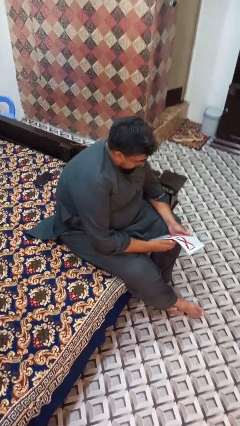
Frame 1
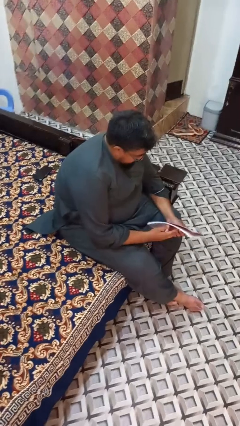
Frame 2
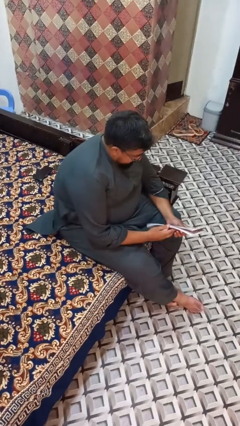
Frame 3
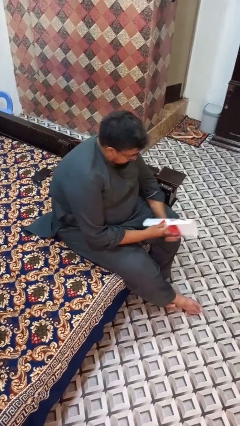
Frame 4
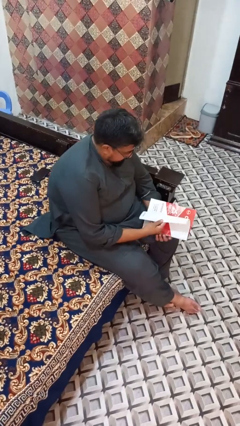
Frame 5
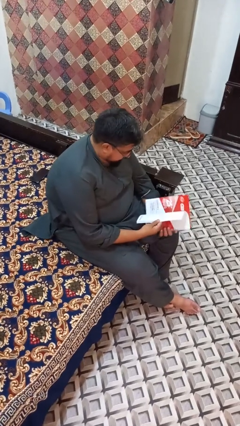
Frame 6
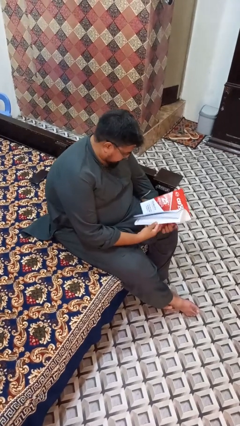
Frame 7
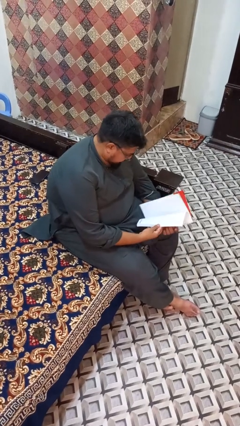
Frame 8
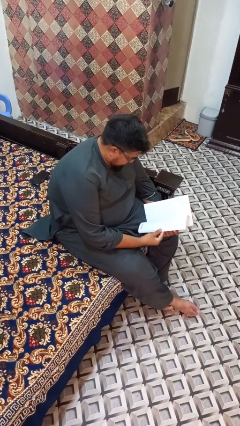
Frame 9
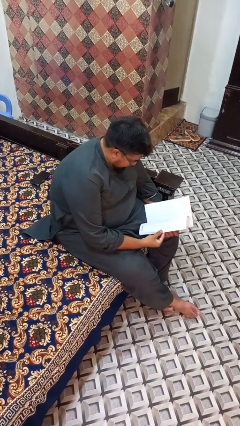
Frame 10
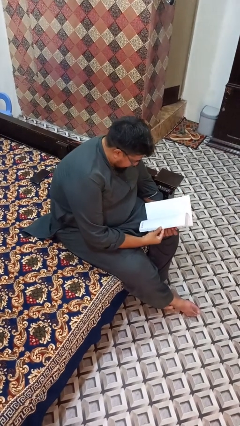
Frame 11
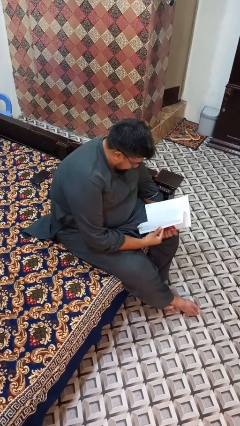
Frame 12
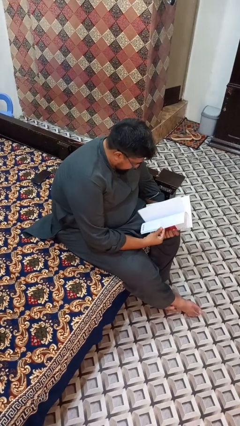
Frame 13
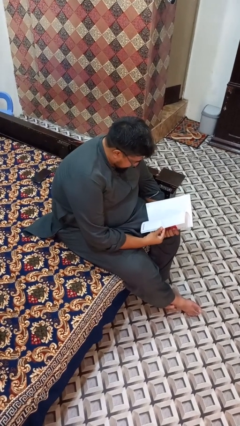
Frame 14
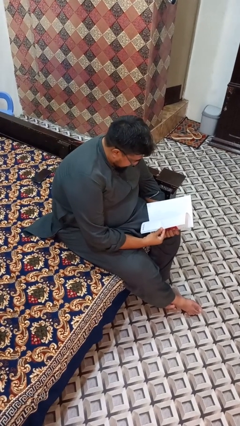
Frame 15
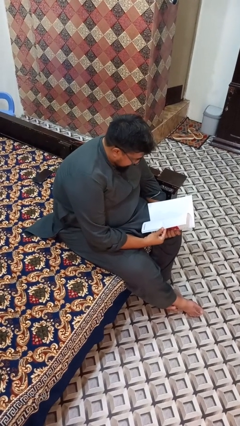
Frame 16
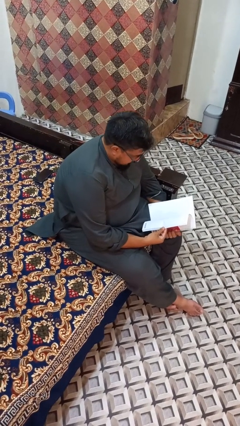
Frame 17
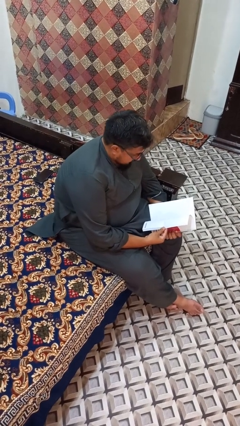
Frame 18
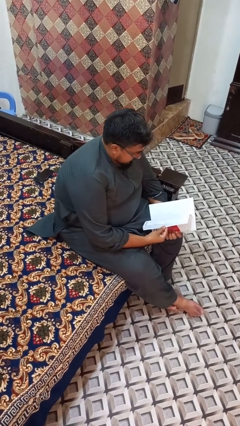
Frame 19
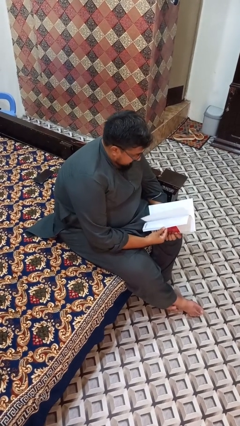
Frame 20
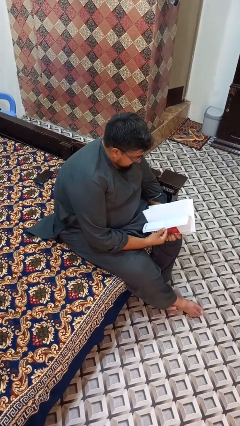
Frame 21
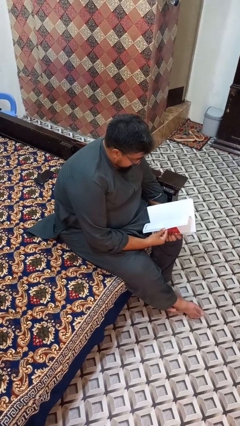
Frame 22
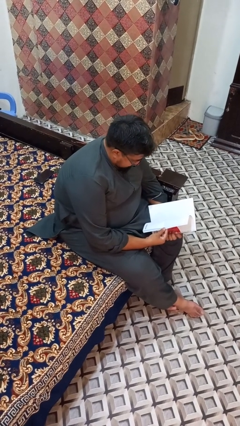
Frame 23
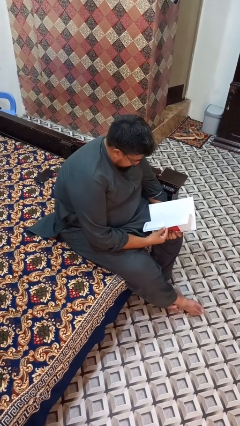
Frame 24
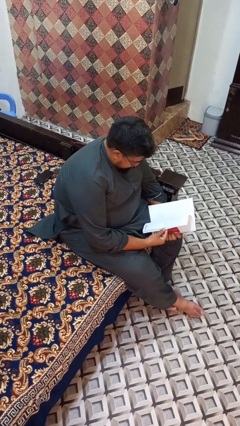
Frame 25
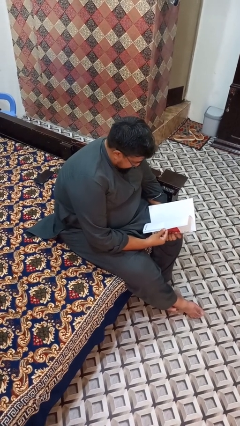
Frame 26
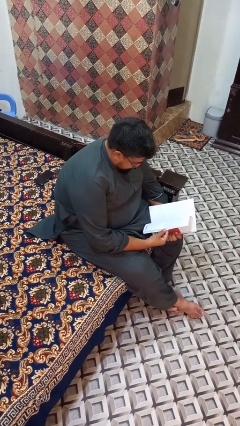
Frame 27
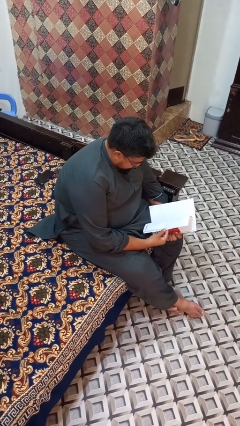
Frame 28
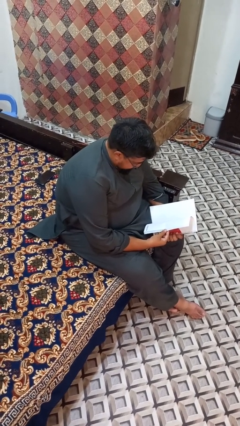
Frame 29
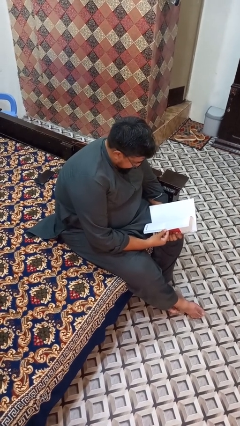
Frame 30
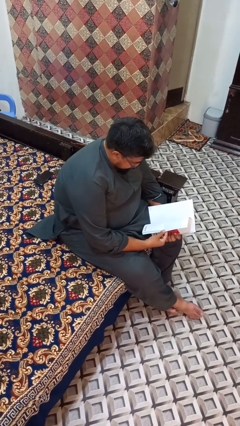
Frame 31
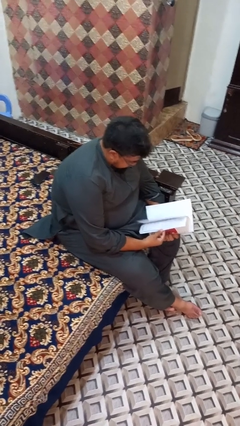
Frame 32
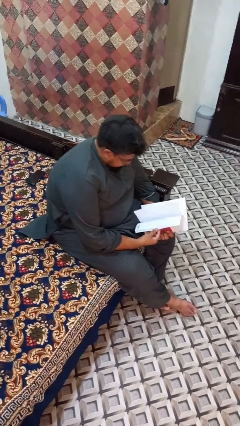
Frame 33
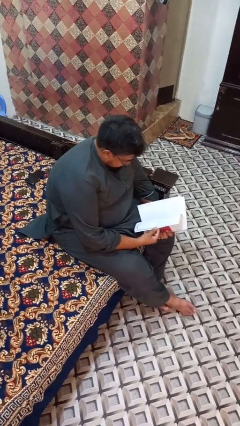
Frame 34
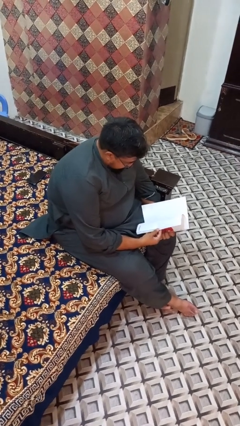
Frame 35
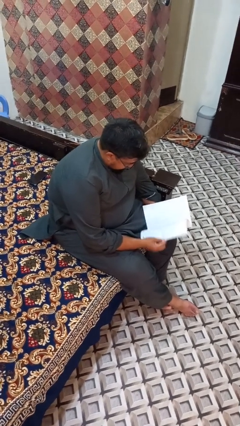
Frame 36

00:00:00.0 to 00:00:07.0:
person reads magazine

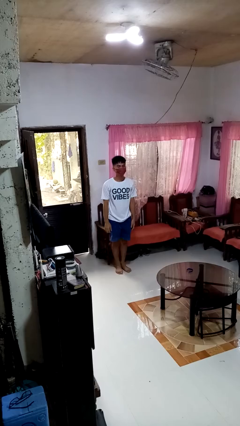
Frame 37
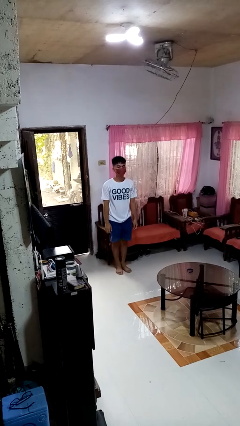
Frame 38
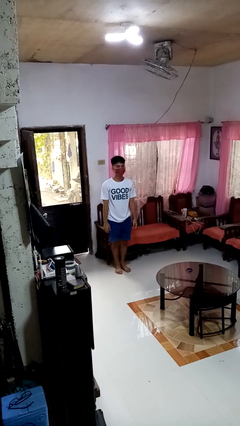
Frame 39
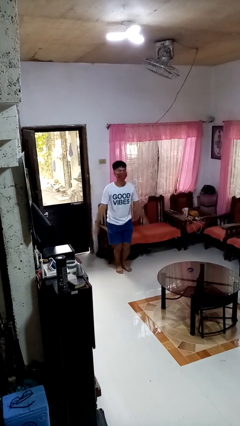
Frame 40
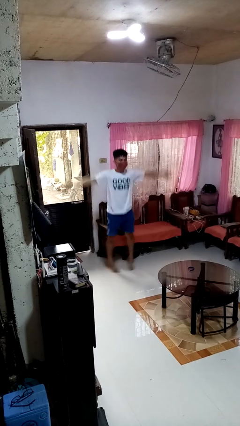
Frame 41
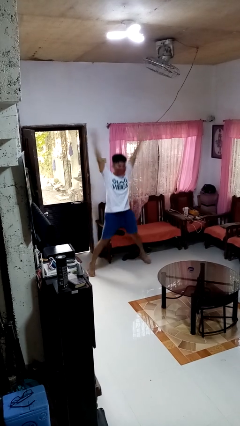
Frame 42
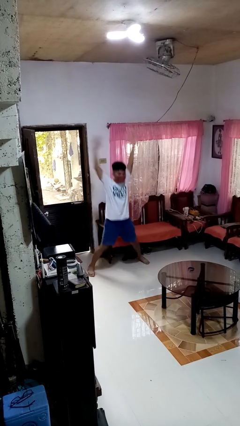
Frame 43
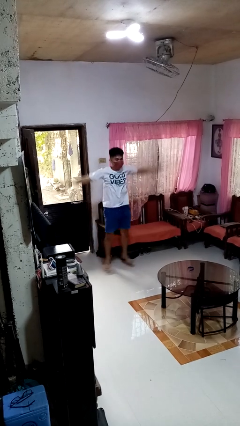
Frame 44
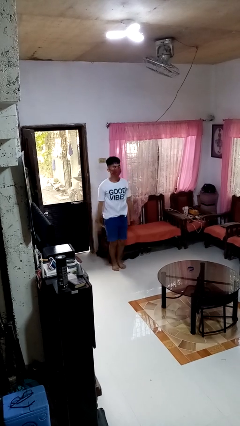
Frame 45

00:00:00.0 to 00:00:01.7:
person exercises with jumping jacks

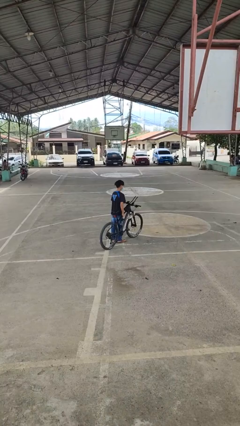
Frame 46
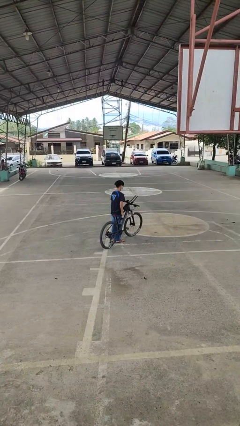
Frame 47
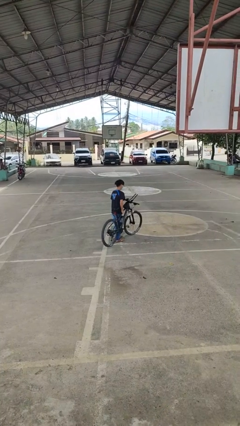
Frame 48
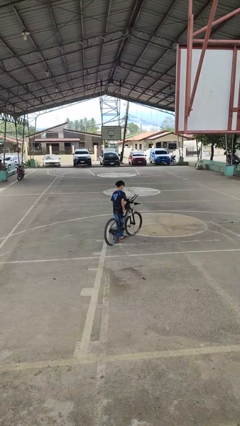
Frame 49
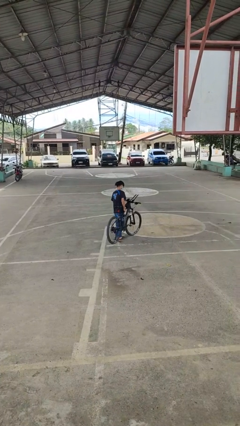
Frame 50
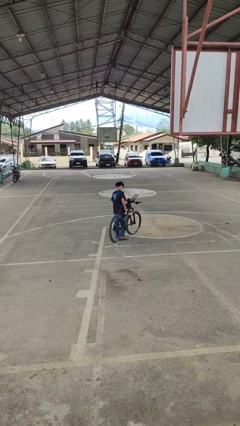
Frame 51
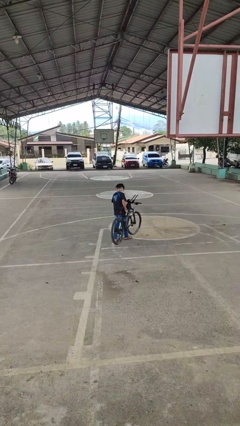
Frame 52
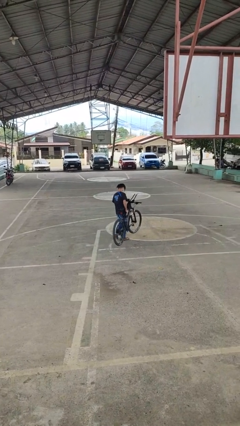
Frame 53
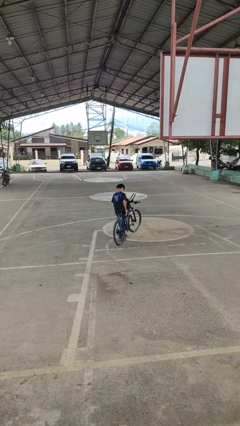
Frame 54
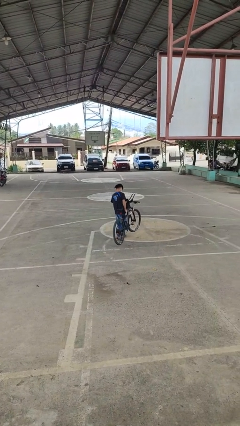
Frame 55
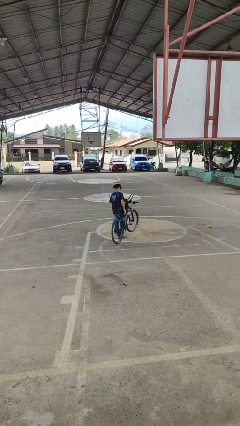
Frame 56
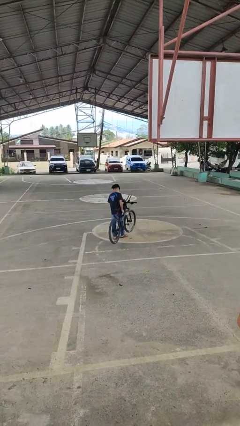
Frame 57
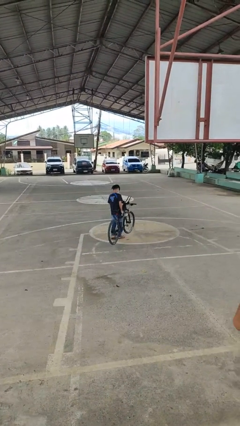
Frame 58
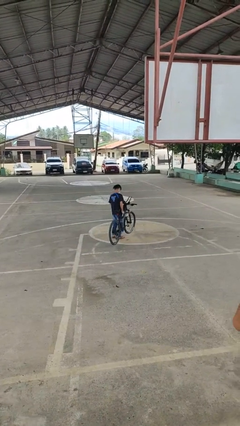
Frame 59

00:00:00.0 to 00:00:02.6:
person carries bicycle

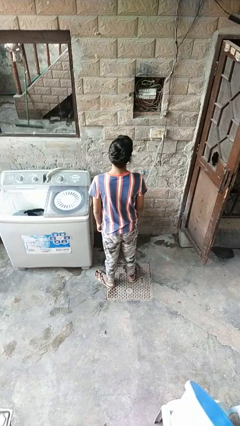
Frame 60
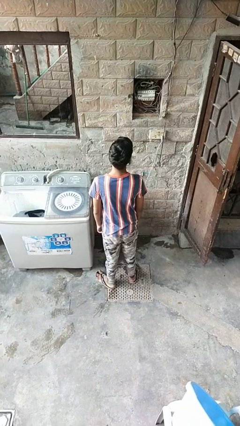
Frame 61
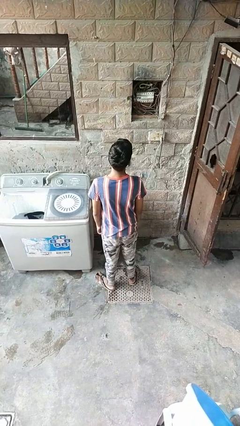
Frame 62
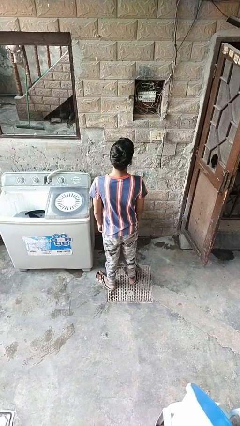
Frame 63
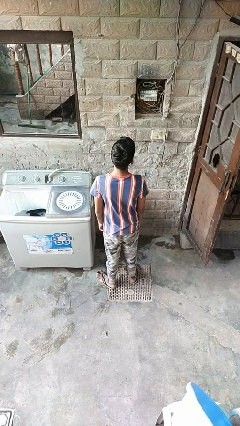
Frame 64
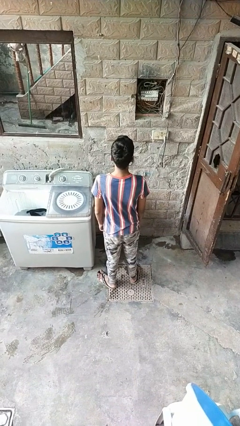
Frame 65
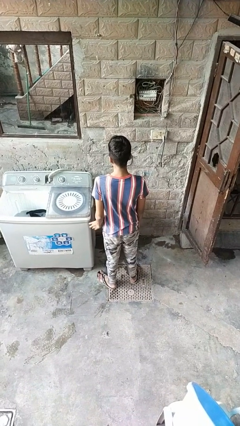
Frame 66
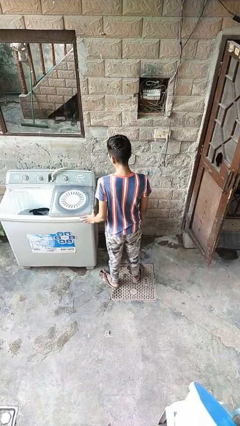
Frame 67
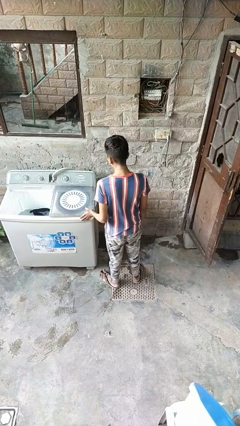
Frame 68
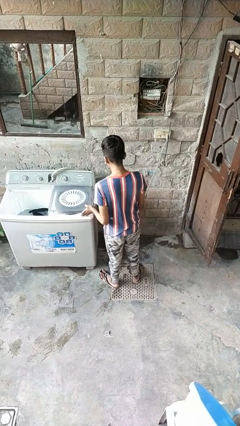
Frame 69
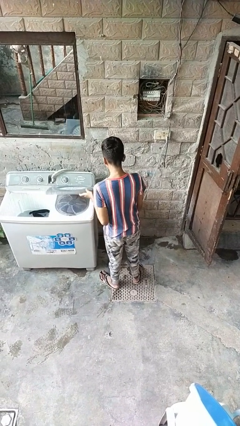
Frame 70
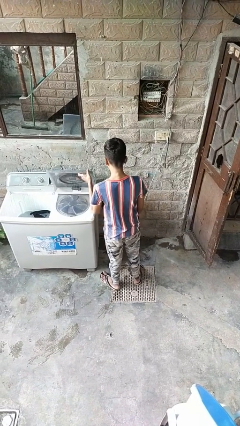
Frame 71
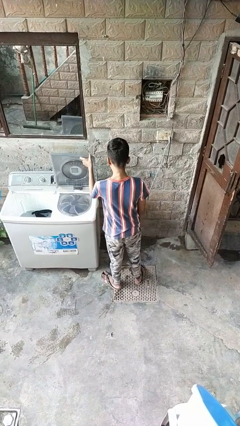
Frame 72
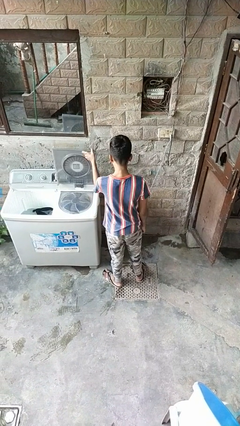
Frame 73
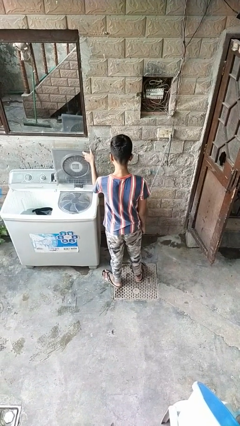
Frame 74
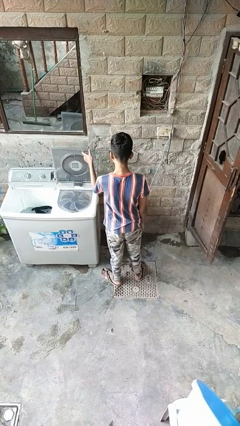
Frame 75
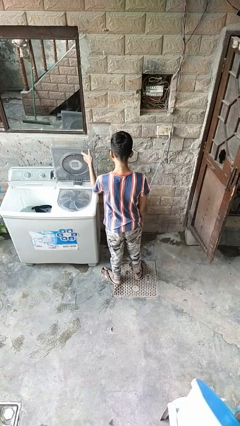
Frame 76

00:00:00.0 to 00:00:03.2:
person turns on faucet

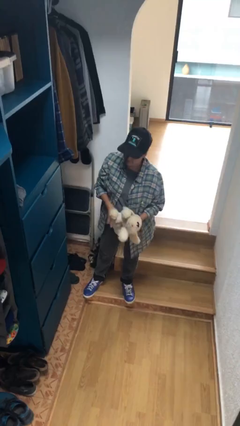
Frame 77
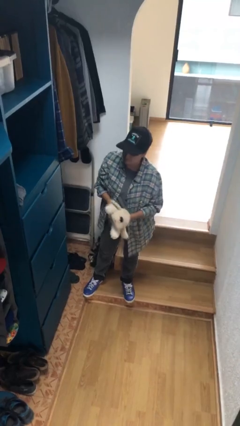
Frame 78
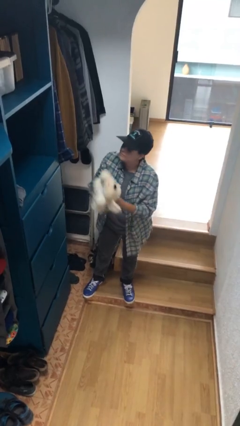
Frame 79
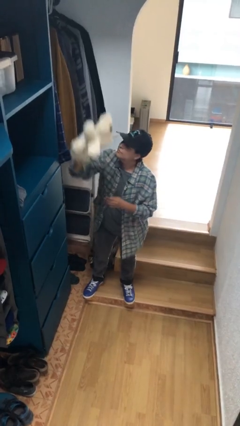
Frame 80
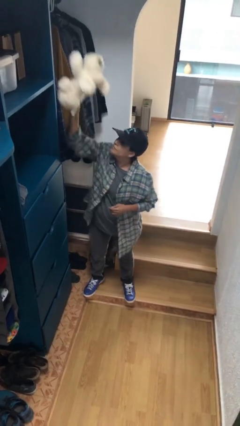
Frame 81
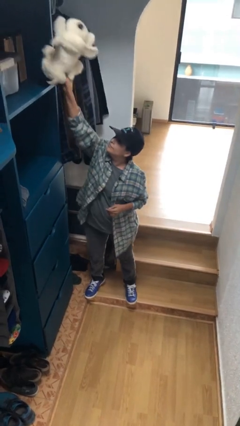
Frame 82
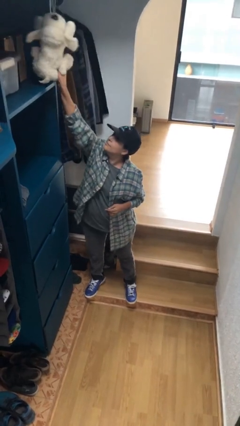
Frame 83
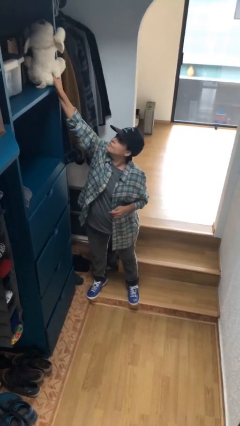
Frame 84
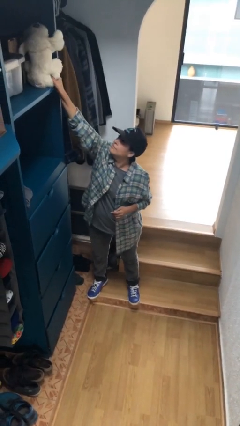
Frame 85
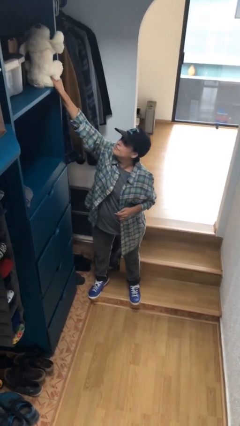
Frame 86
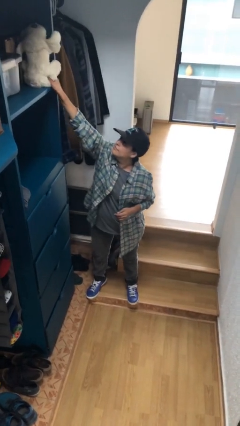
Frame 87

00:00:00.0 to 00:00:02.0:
person puts down object on shelf

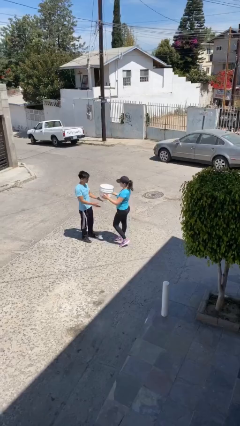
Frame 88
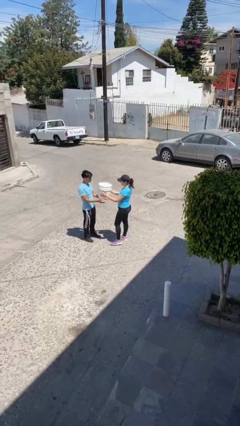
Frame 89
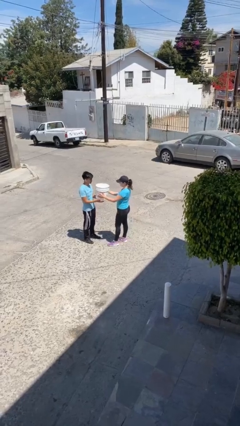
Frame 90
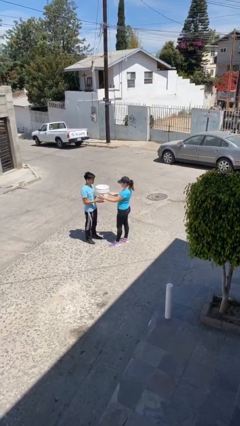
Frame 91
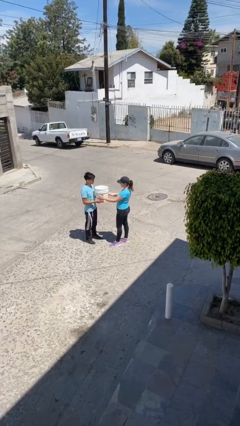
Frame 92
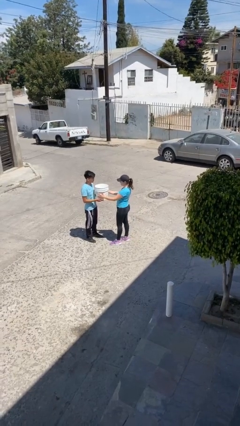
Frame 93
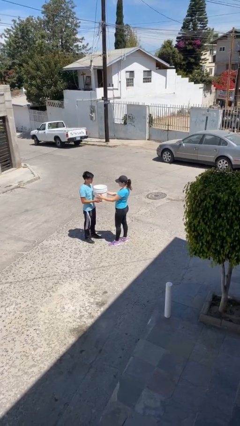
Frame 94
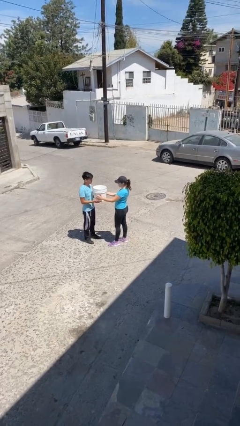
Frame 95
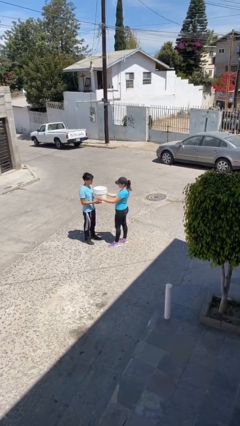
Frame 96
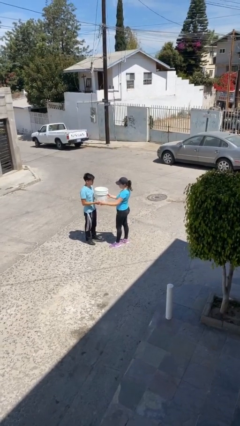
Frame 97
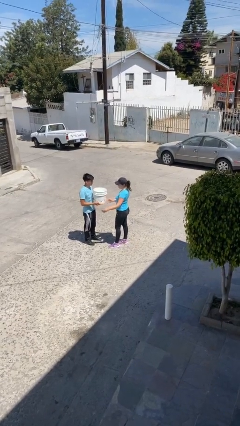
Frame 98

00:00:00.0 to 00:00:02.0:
person transfers object to person
